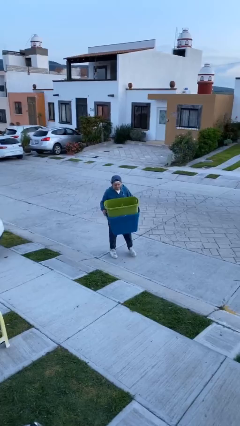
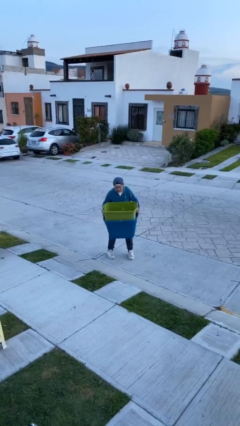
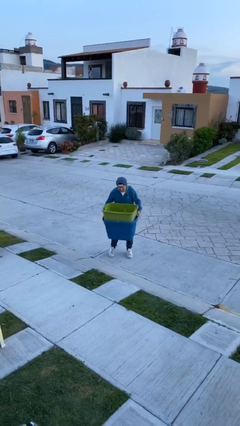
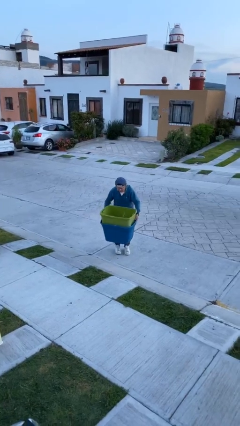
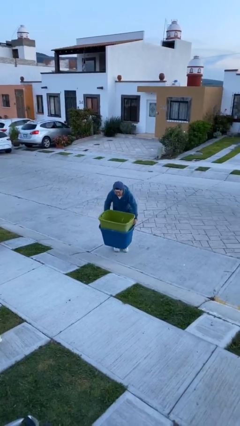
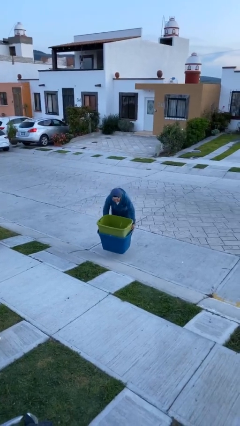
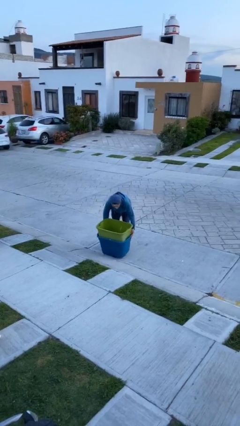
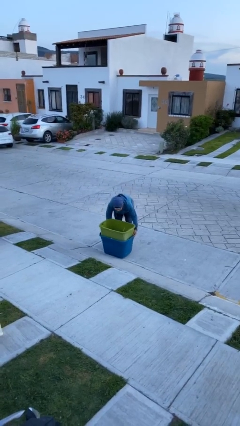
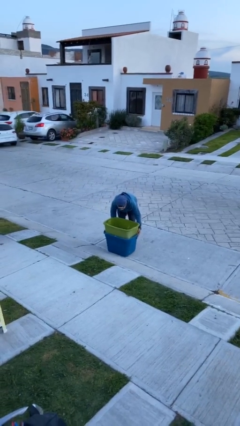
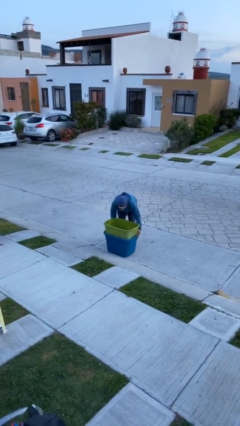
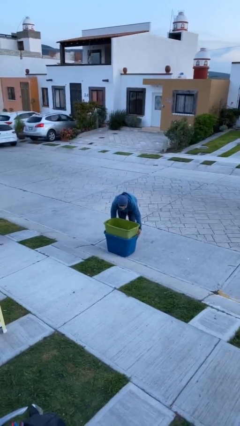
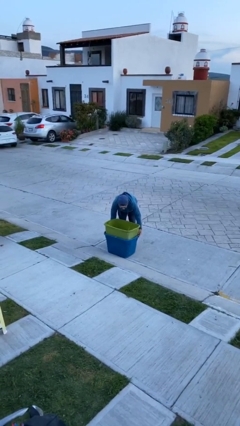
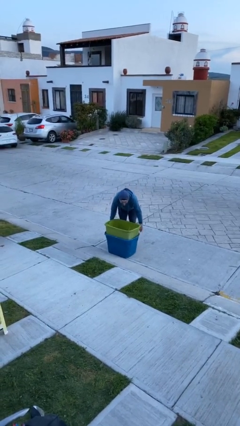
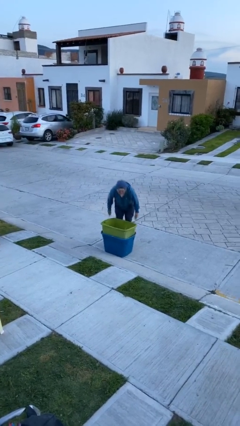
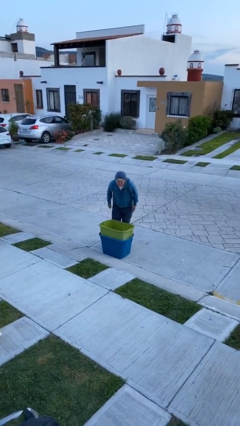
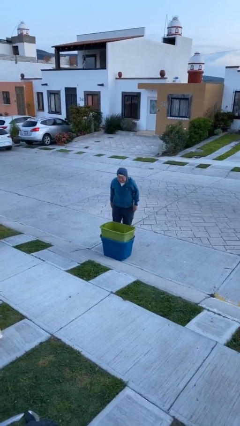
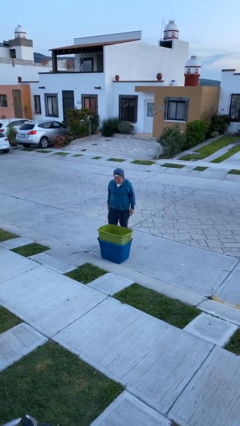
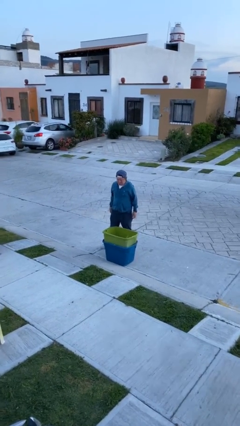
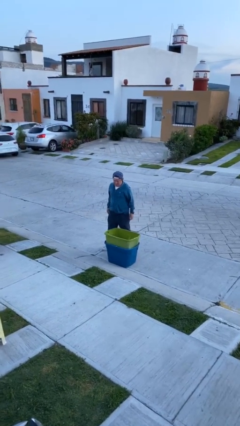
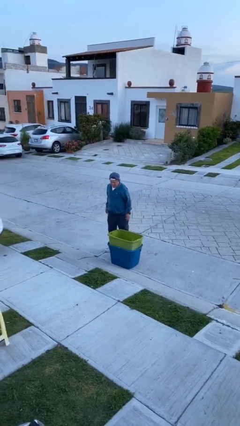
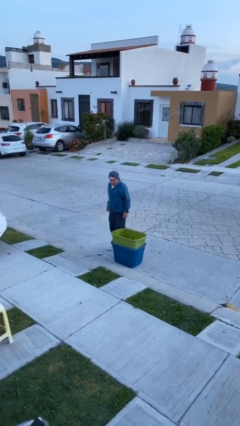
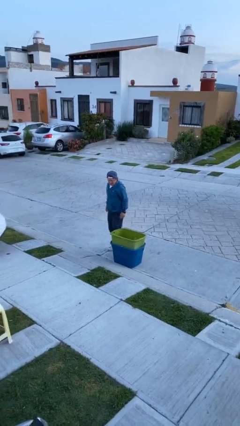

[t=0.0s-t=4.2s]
person puts down object on floor

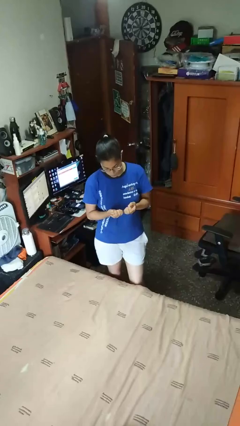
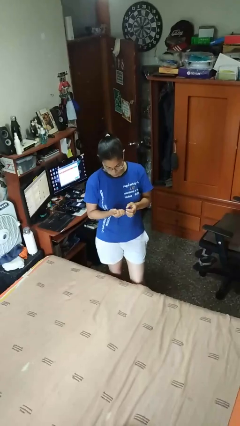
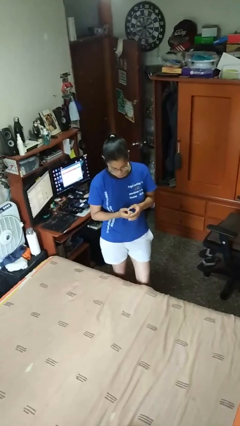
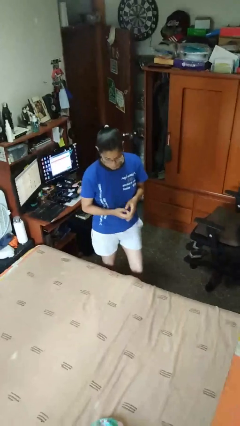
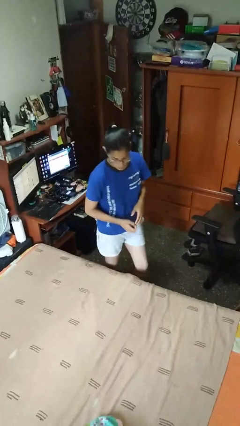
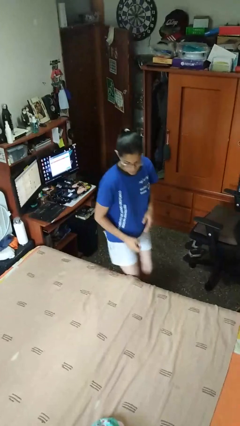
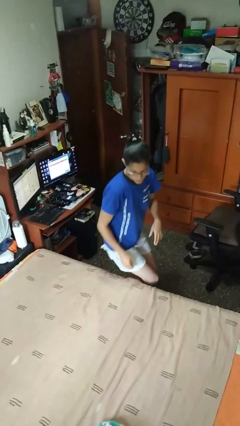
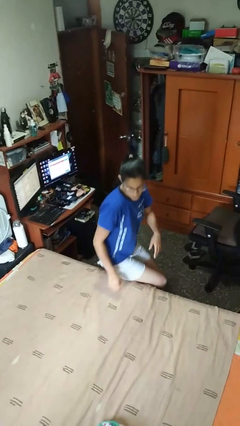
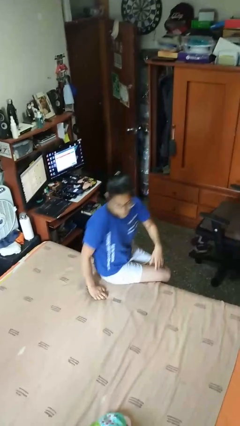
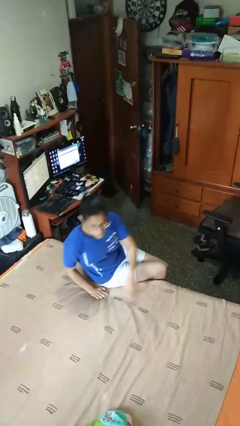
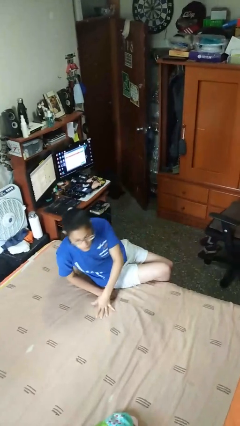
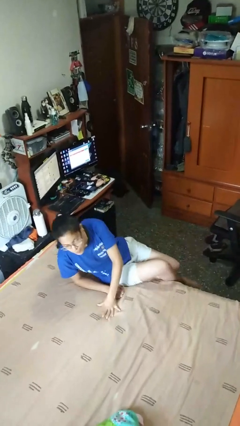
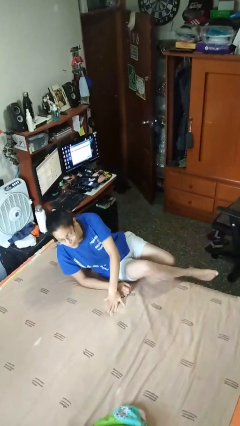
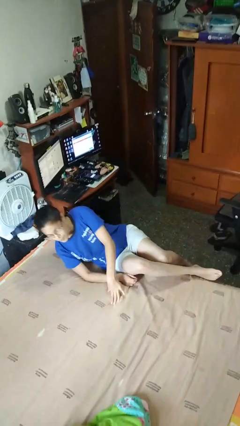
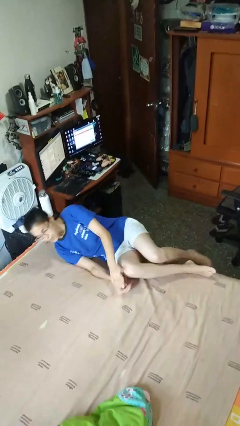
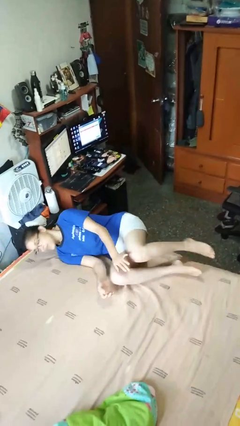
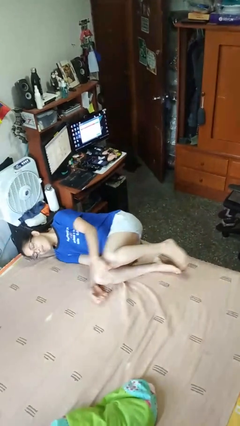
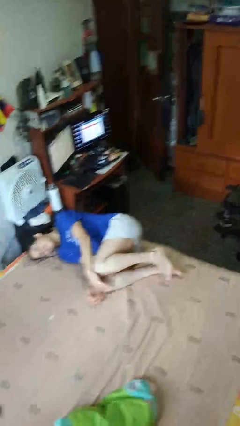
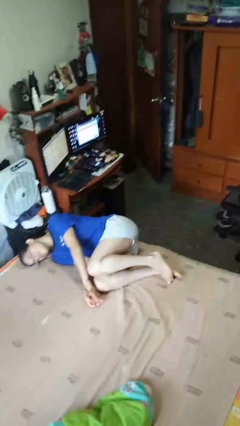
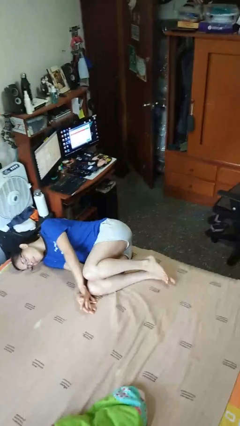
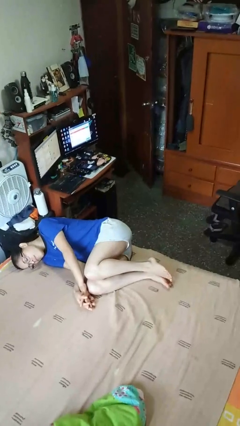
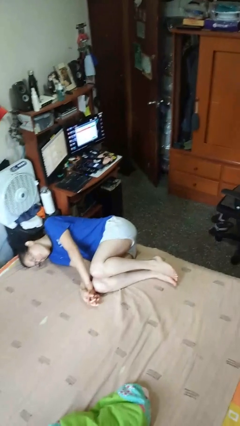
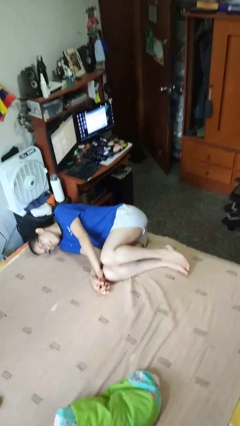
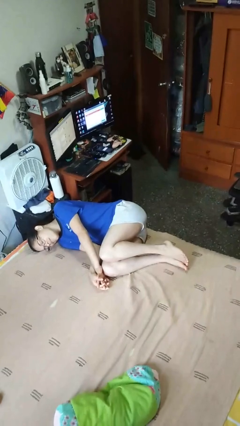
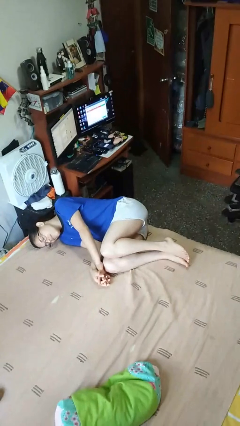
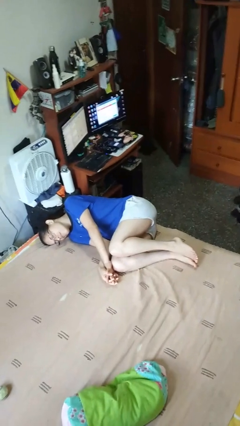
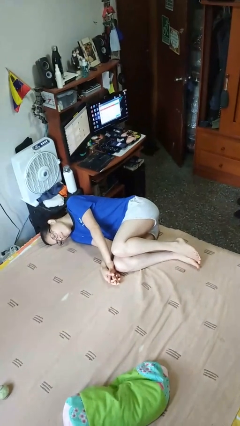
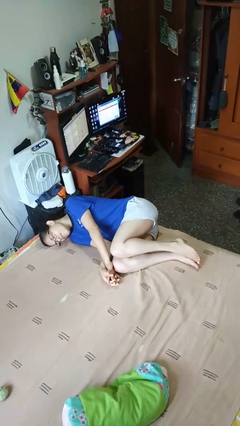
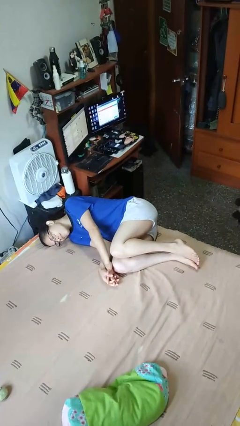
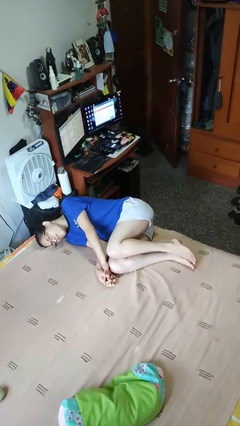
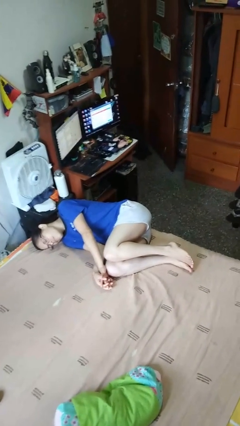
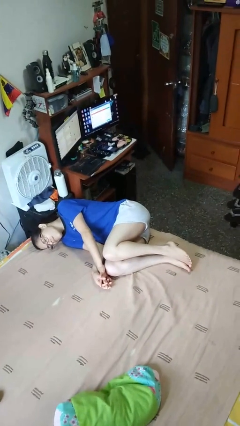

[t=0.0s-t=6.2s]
person lies down on bed

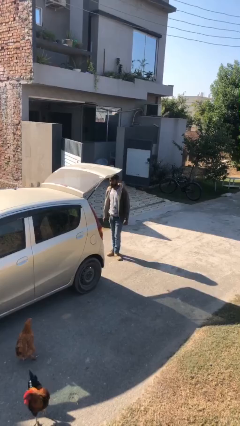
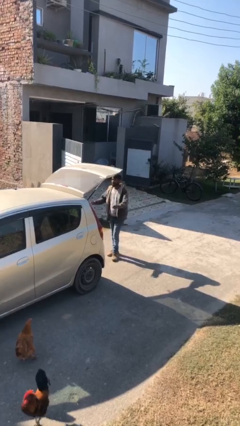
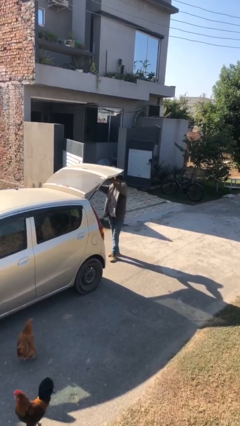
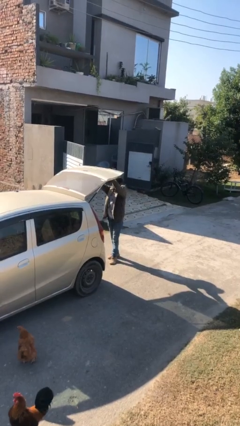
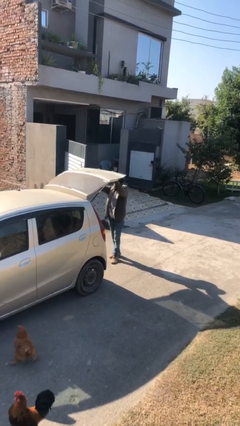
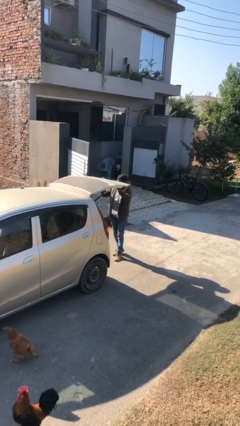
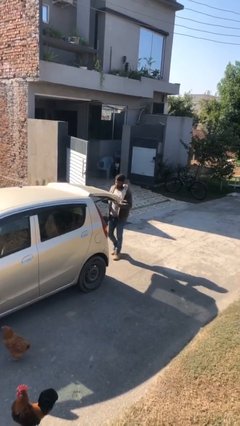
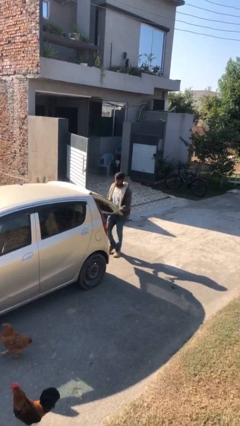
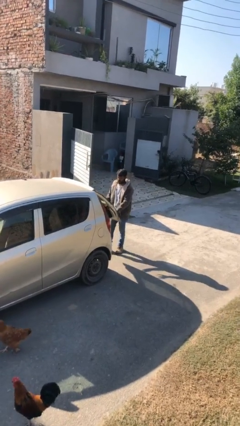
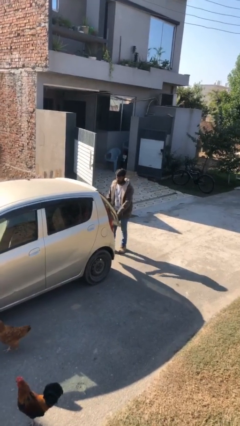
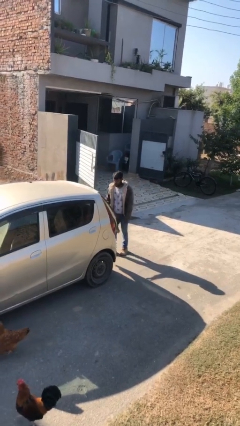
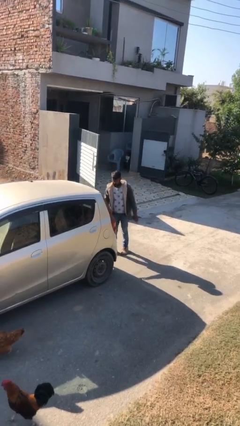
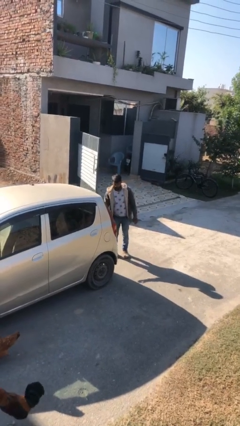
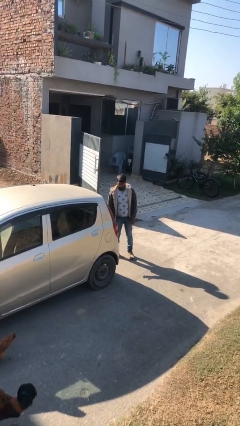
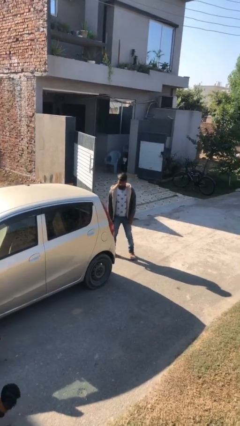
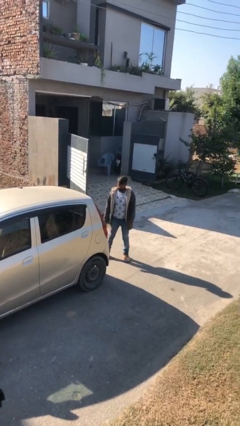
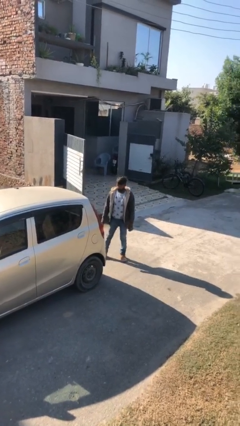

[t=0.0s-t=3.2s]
person closes car trunk

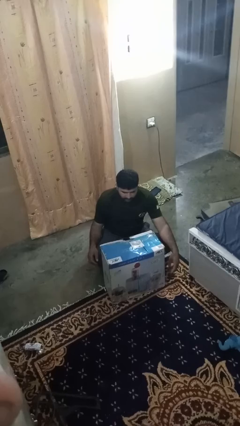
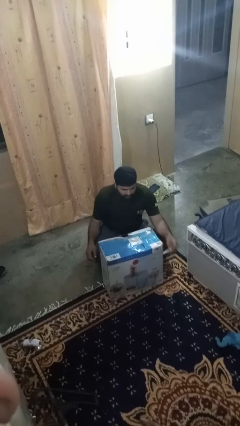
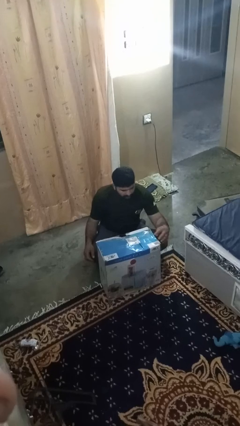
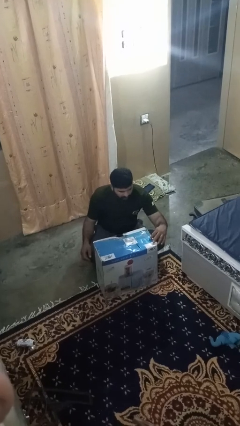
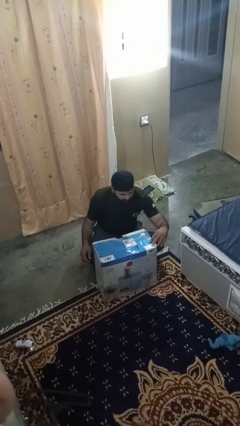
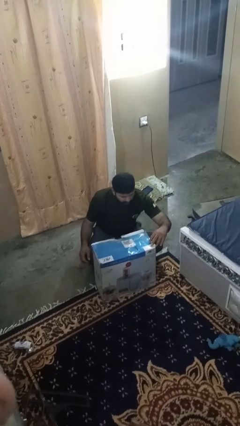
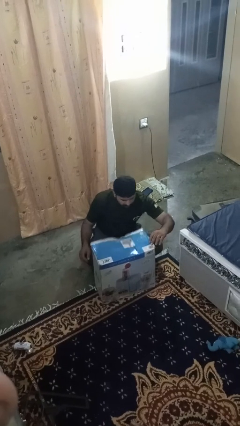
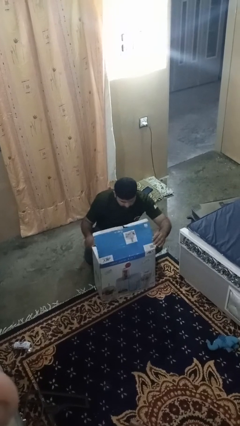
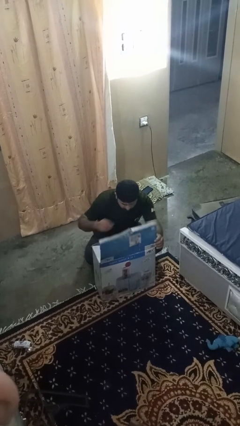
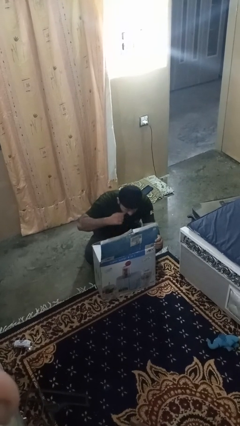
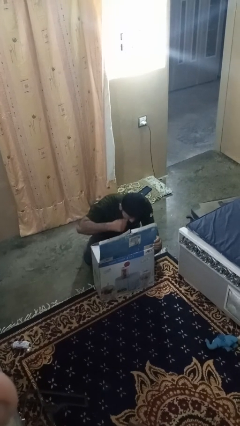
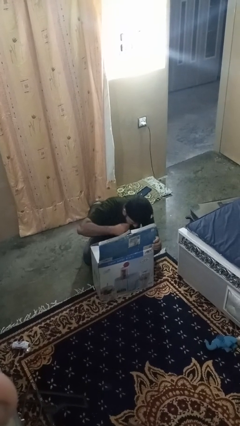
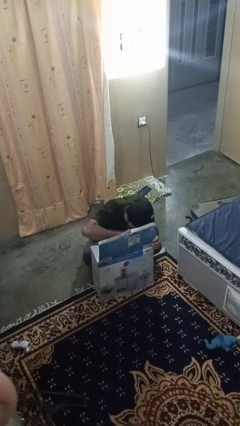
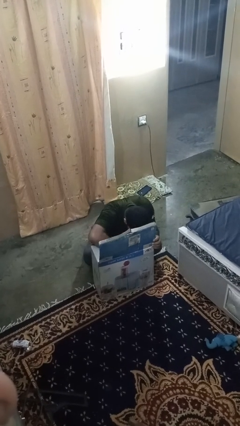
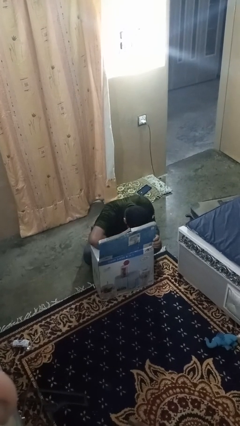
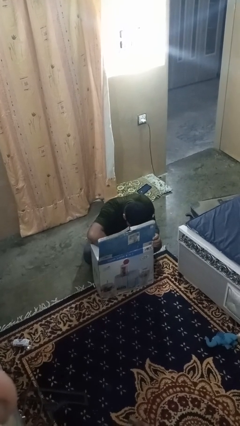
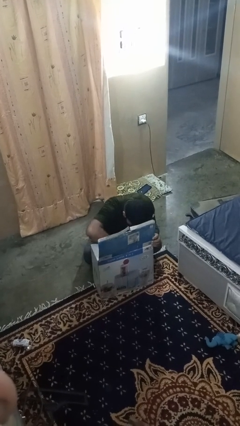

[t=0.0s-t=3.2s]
person searches in box

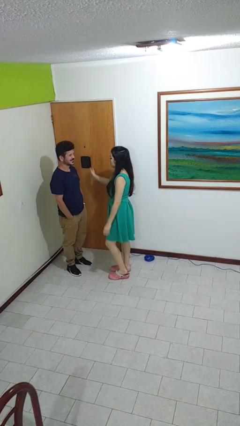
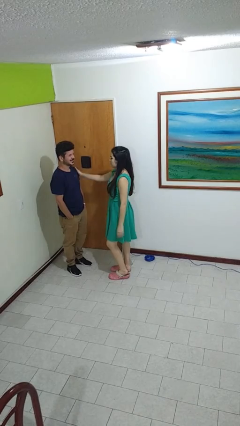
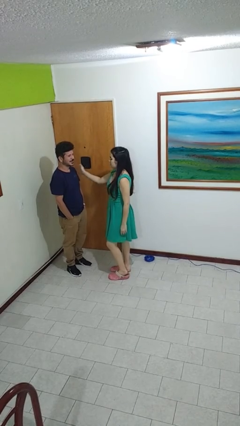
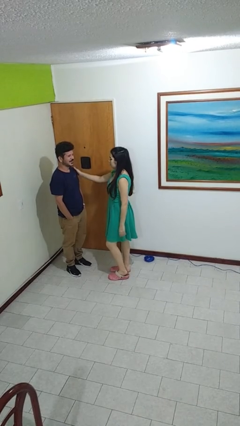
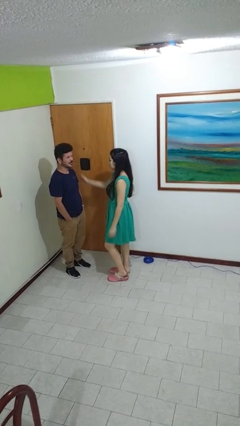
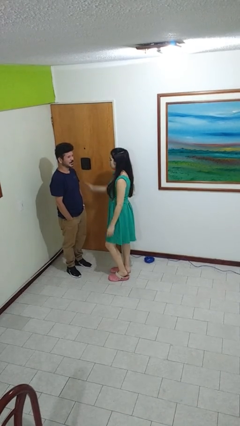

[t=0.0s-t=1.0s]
person pounds shoulders of person
